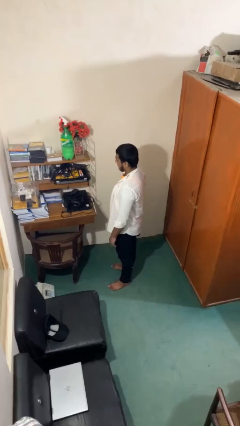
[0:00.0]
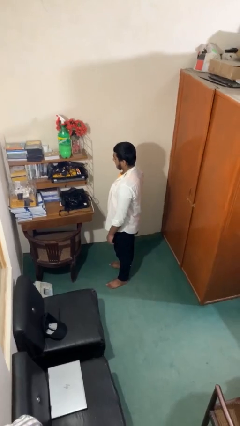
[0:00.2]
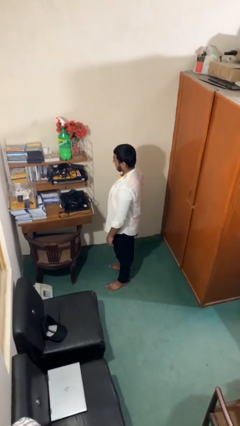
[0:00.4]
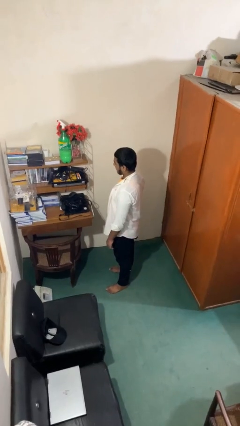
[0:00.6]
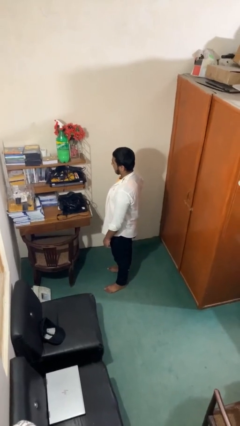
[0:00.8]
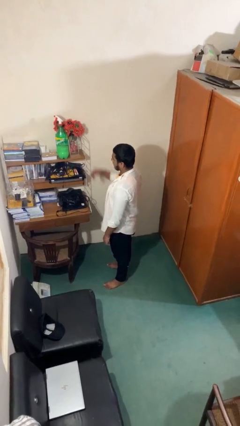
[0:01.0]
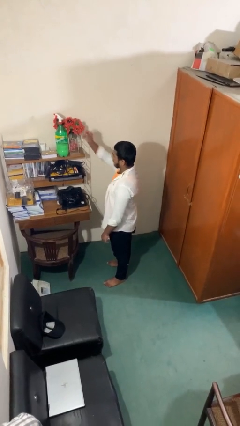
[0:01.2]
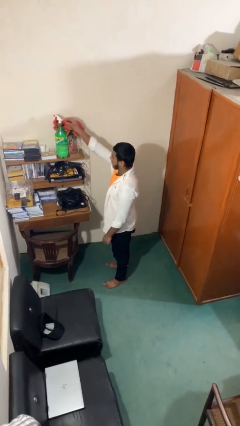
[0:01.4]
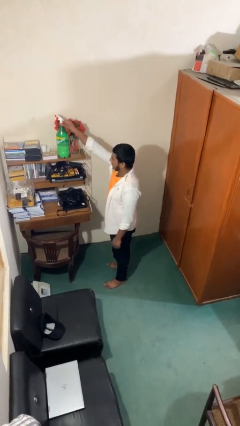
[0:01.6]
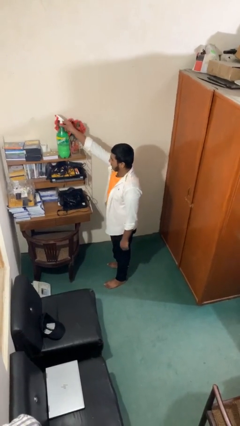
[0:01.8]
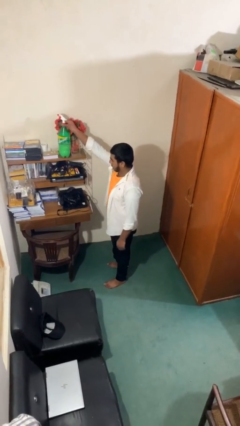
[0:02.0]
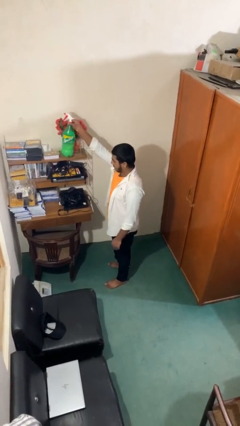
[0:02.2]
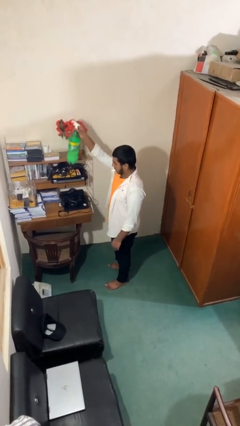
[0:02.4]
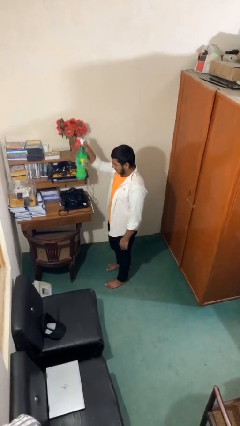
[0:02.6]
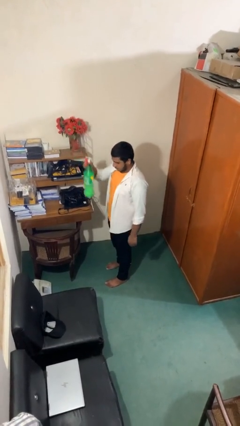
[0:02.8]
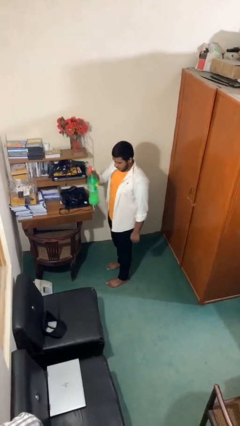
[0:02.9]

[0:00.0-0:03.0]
person picks up object from shelf

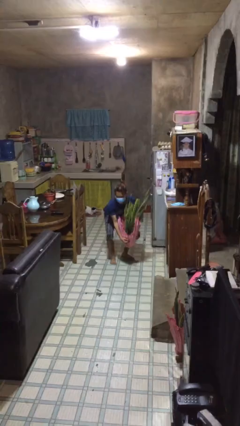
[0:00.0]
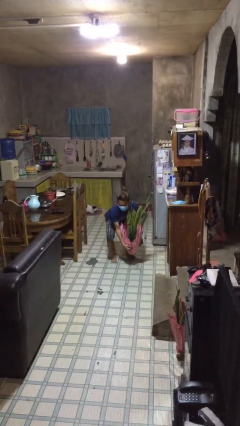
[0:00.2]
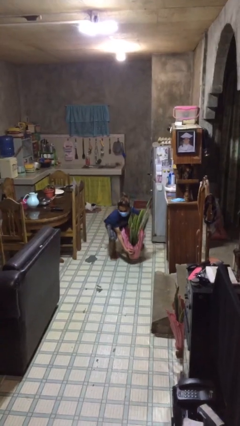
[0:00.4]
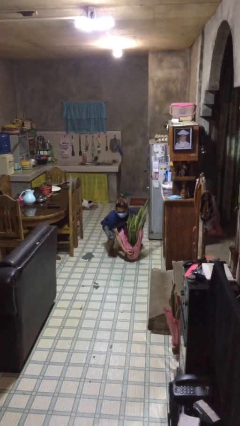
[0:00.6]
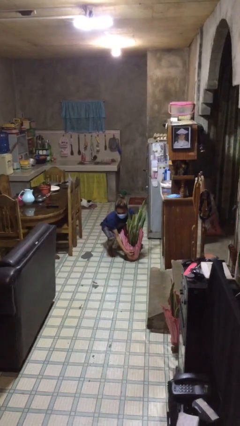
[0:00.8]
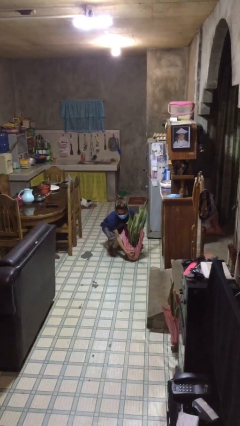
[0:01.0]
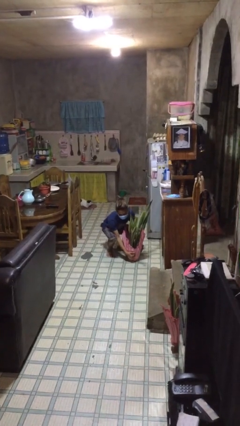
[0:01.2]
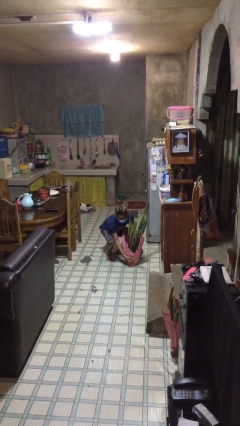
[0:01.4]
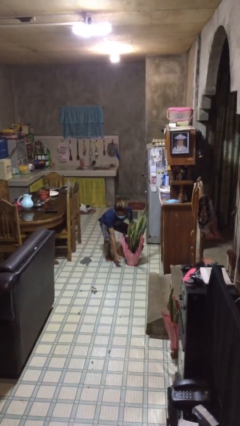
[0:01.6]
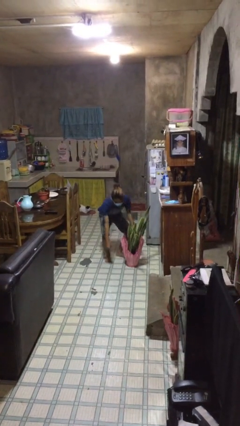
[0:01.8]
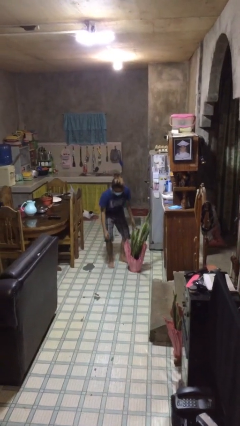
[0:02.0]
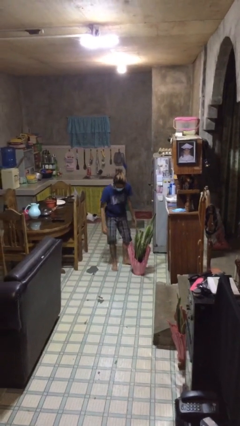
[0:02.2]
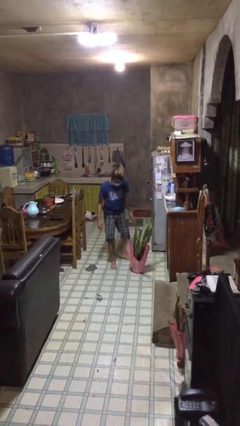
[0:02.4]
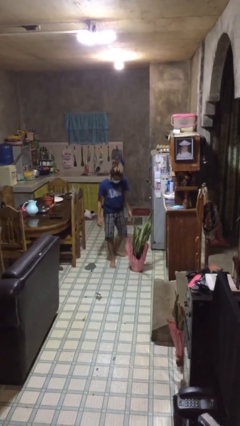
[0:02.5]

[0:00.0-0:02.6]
person puts down object on floor

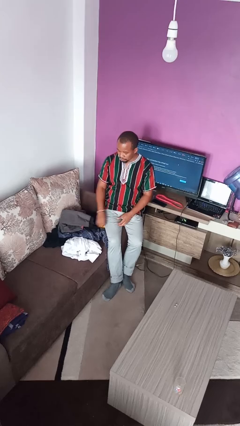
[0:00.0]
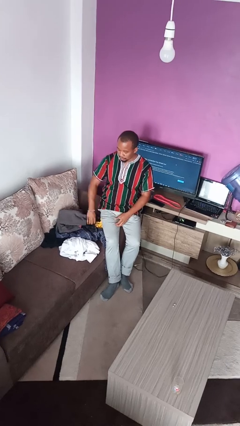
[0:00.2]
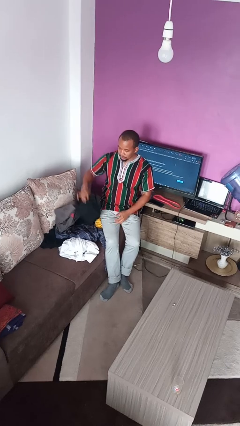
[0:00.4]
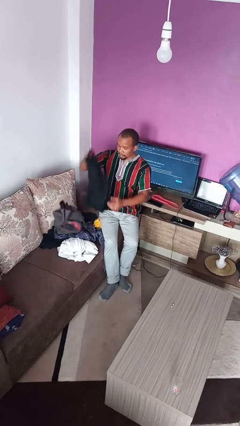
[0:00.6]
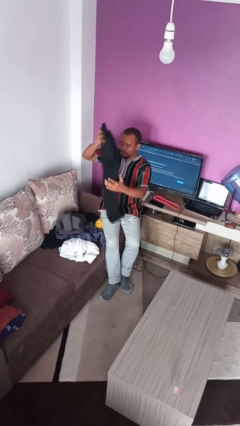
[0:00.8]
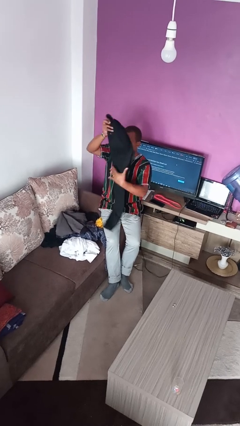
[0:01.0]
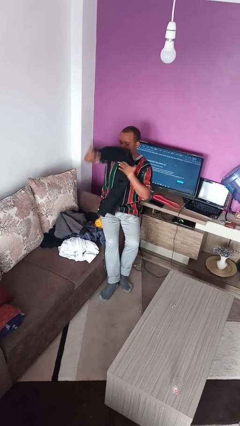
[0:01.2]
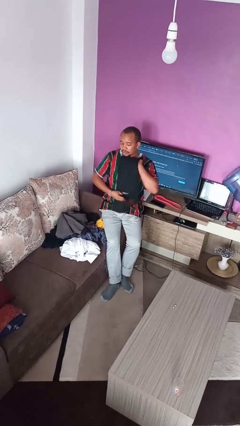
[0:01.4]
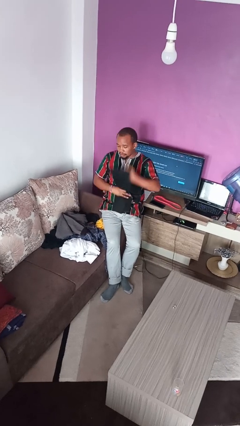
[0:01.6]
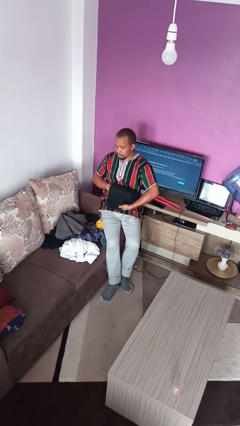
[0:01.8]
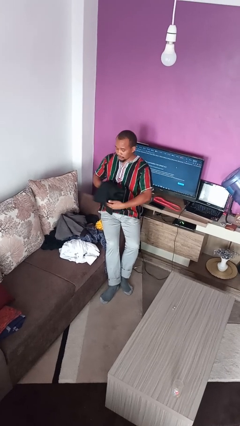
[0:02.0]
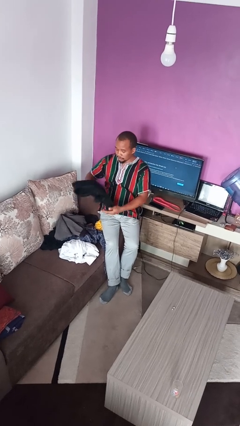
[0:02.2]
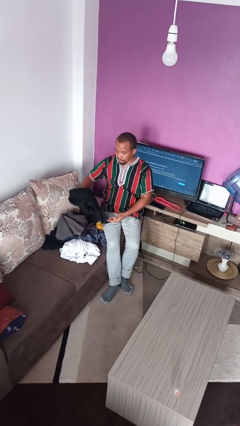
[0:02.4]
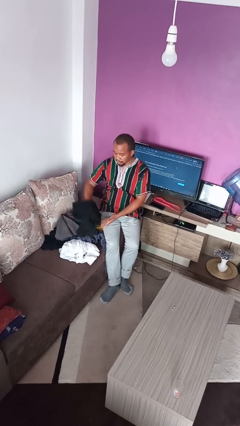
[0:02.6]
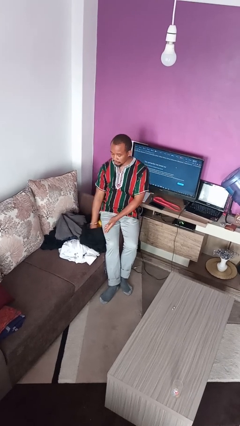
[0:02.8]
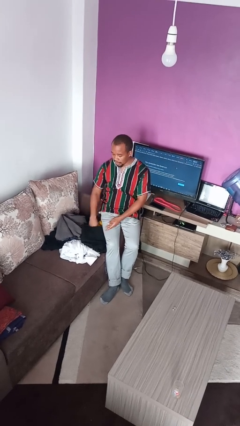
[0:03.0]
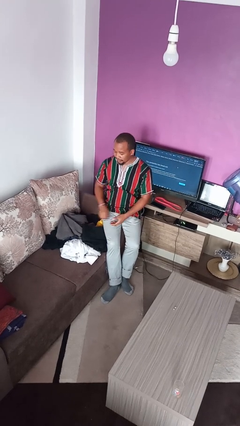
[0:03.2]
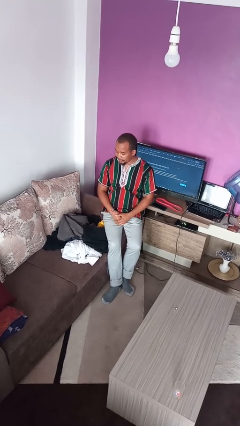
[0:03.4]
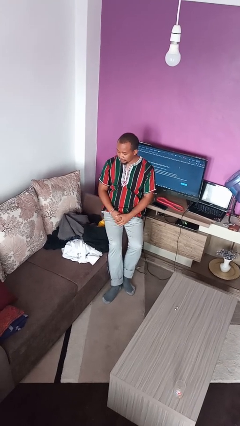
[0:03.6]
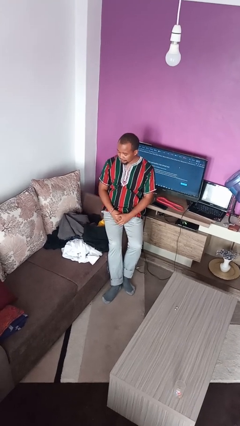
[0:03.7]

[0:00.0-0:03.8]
person folds pants

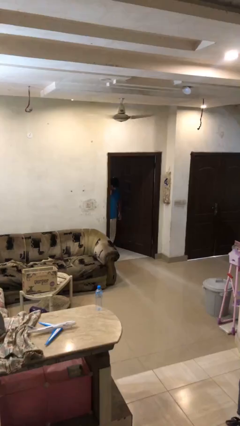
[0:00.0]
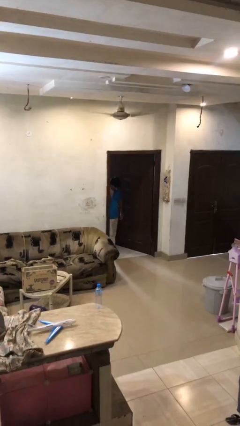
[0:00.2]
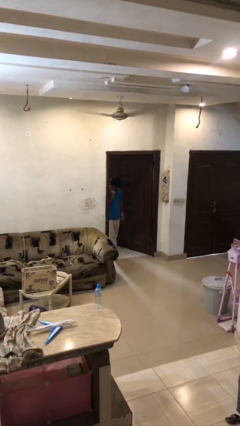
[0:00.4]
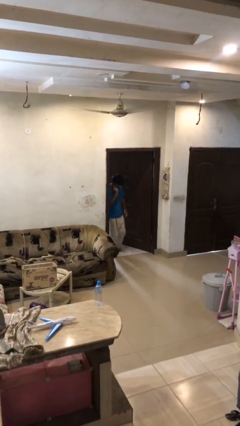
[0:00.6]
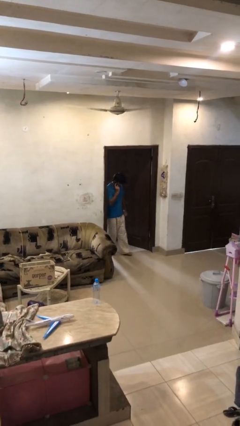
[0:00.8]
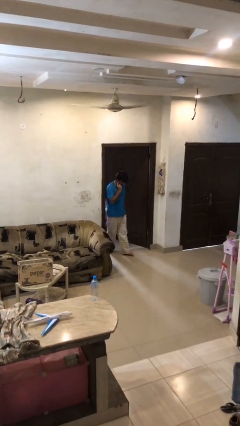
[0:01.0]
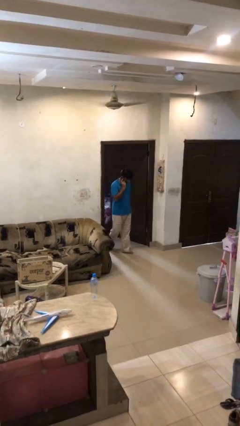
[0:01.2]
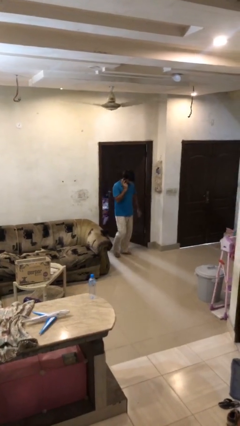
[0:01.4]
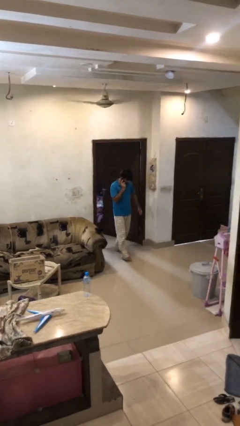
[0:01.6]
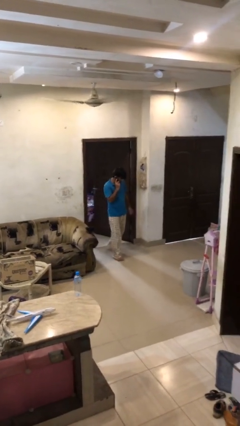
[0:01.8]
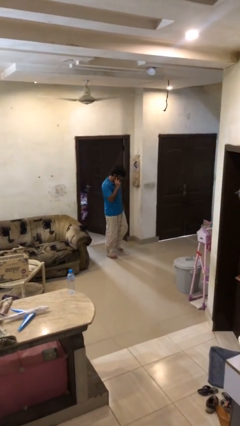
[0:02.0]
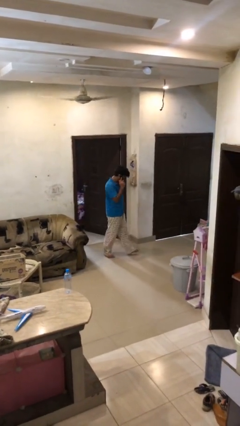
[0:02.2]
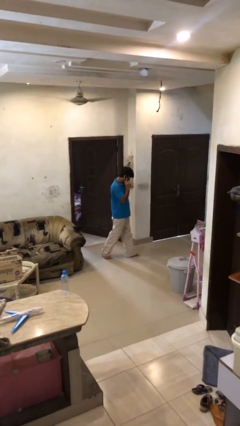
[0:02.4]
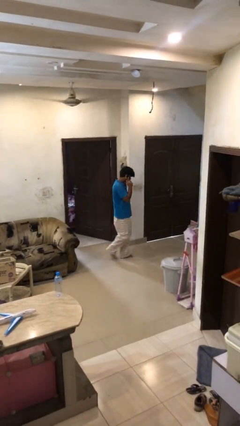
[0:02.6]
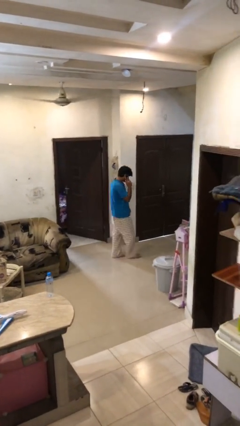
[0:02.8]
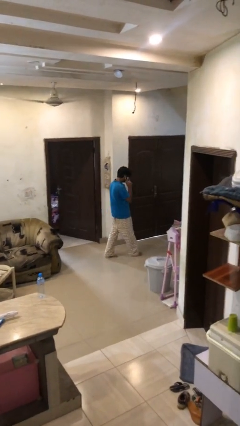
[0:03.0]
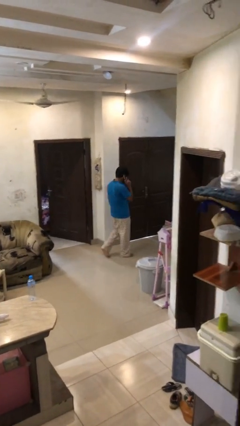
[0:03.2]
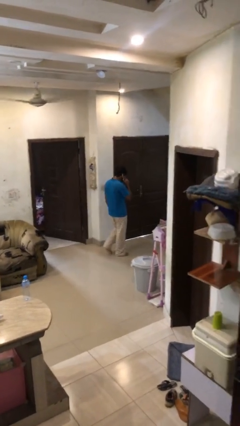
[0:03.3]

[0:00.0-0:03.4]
person enters scene through structure

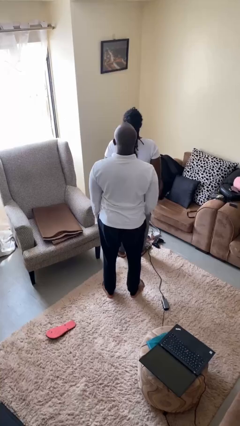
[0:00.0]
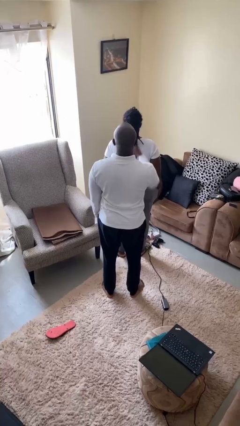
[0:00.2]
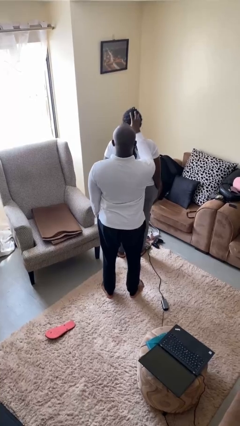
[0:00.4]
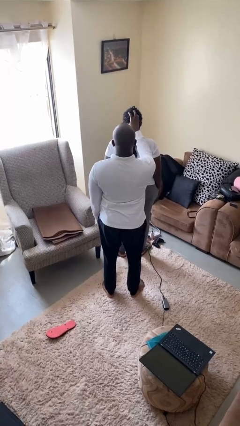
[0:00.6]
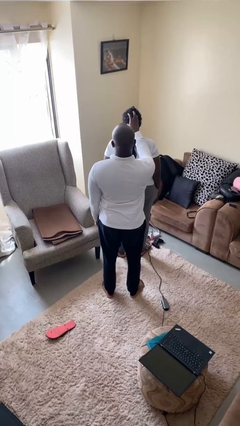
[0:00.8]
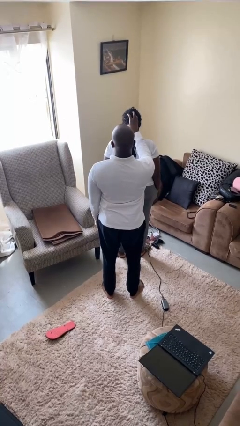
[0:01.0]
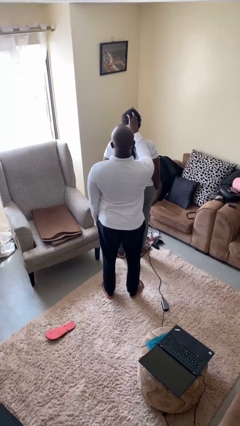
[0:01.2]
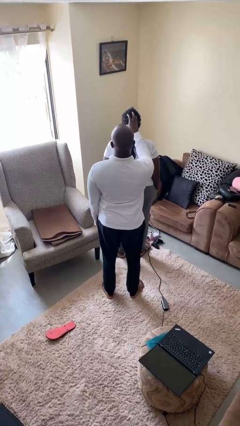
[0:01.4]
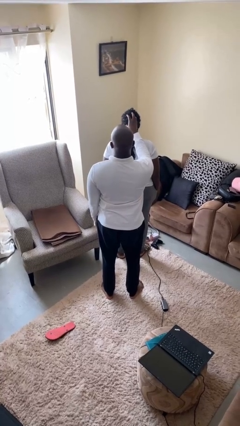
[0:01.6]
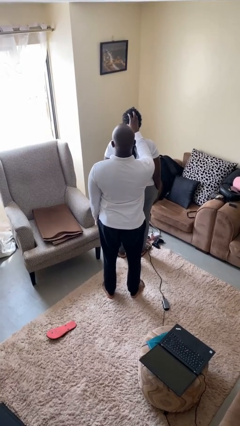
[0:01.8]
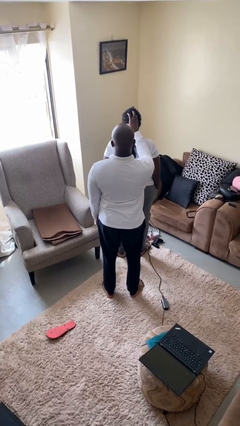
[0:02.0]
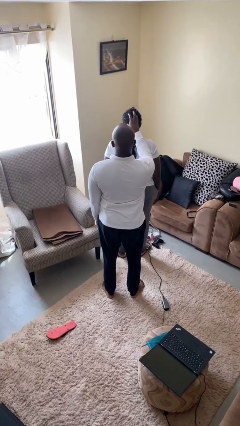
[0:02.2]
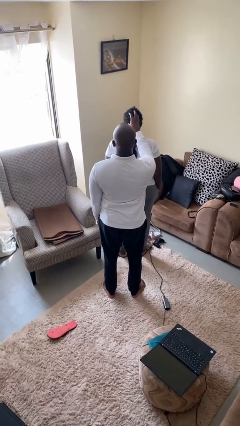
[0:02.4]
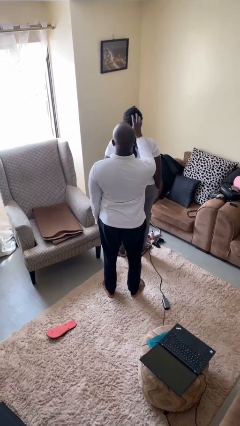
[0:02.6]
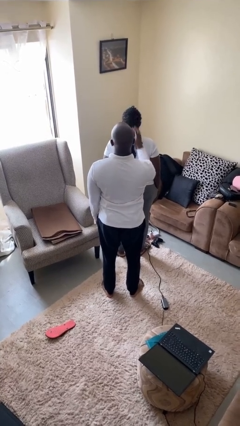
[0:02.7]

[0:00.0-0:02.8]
person grabs person by hair

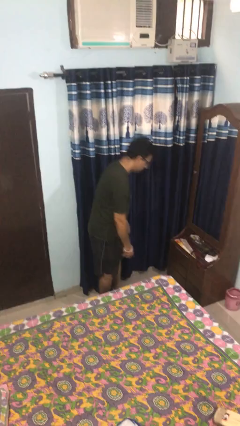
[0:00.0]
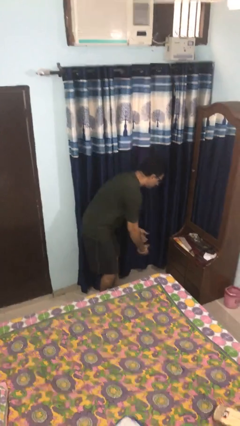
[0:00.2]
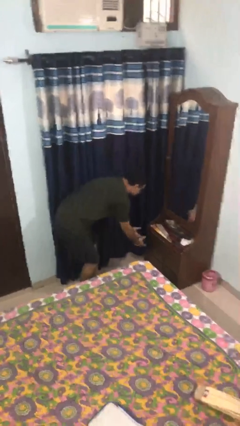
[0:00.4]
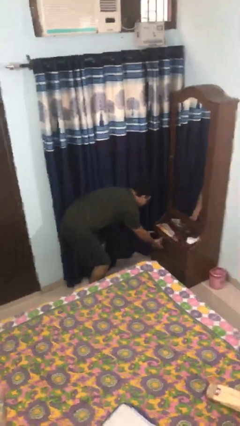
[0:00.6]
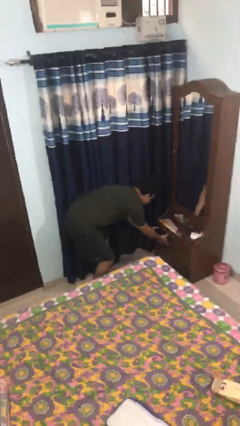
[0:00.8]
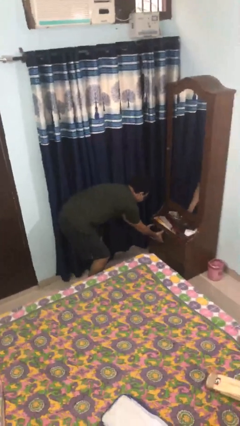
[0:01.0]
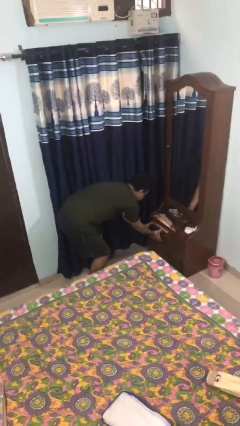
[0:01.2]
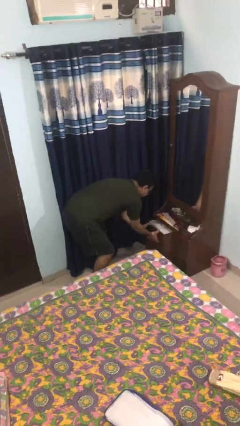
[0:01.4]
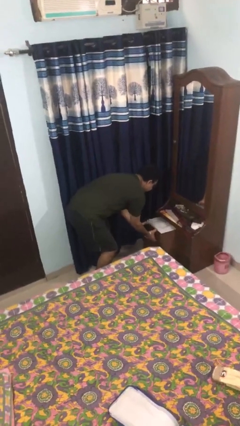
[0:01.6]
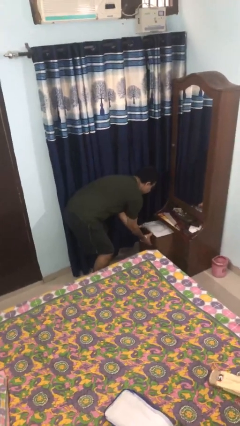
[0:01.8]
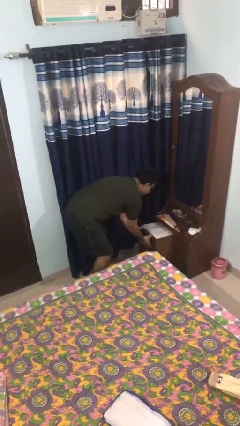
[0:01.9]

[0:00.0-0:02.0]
person opens dresser drawer
